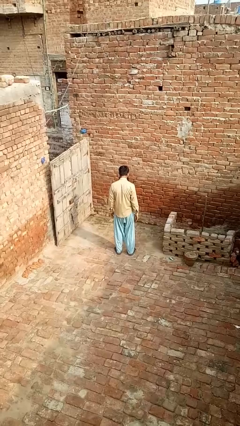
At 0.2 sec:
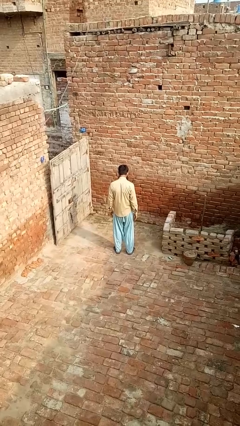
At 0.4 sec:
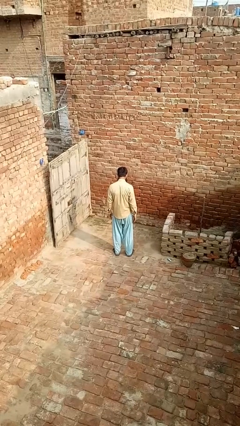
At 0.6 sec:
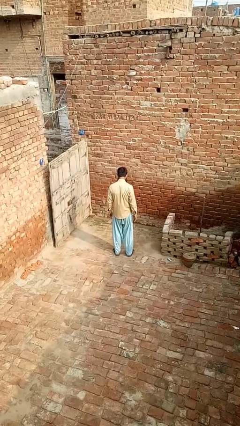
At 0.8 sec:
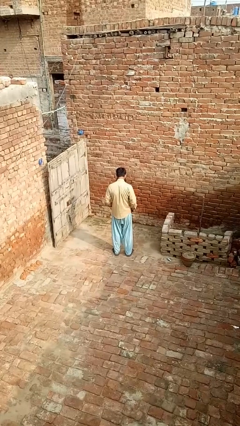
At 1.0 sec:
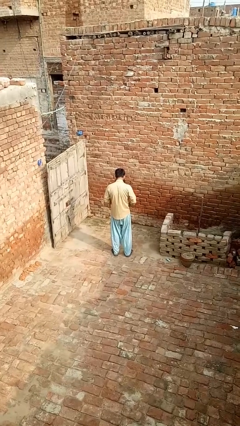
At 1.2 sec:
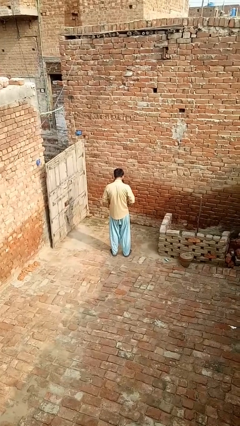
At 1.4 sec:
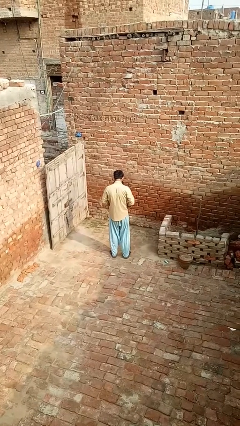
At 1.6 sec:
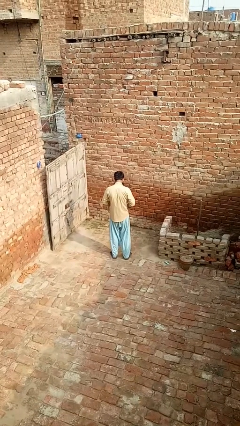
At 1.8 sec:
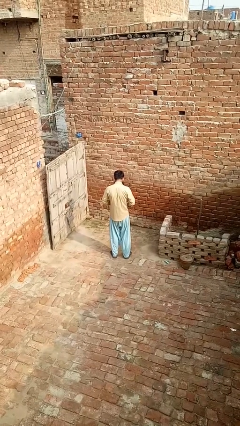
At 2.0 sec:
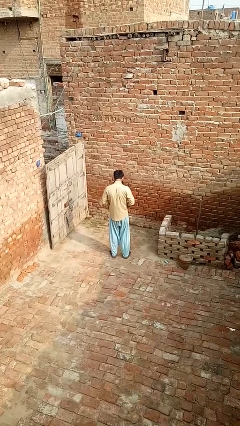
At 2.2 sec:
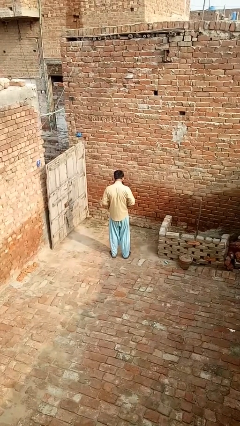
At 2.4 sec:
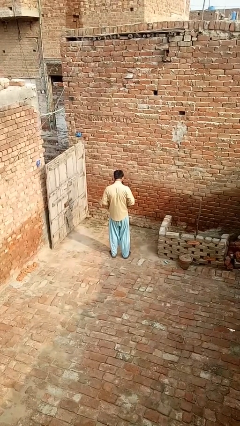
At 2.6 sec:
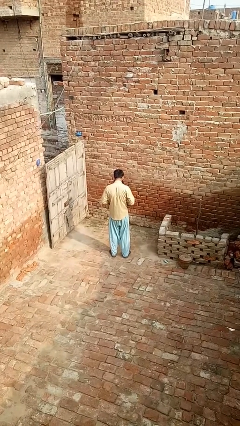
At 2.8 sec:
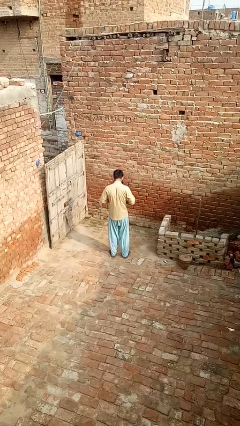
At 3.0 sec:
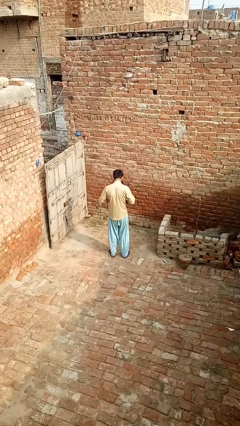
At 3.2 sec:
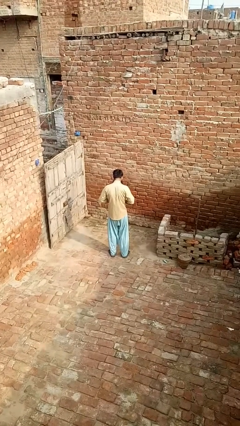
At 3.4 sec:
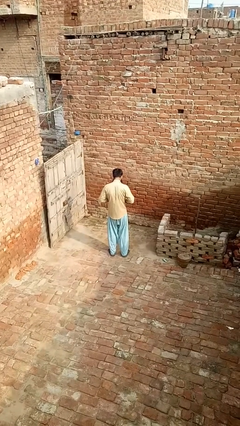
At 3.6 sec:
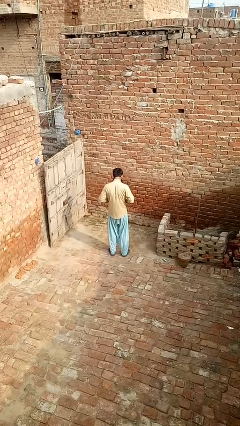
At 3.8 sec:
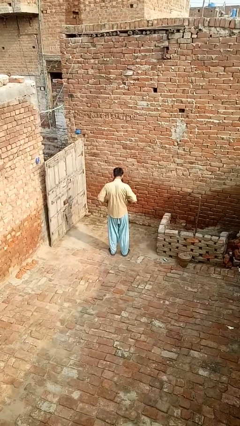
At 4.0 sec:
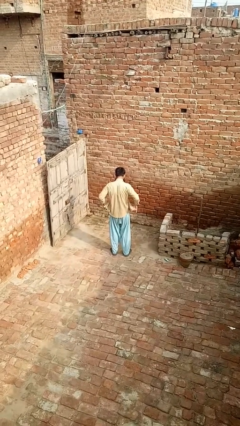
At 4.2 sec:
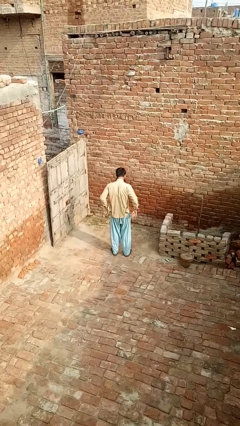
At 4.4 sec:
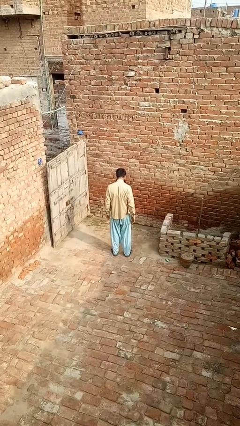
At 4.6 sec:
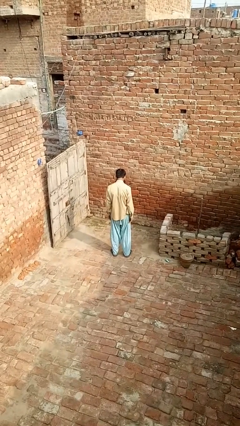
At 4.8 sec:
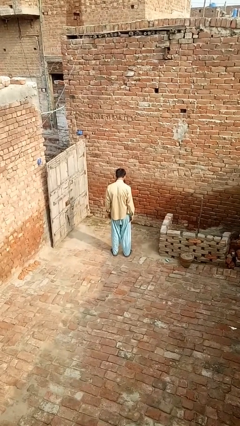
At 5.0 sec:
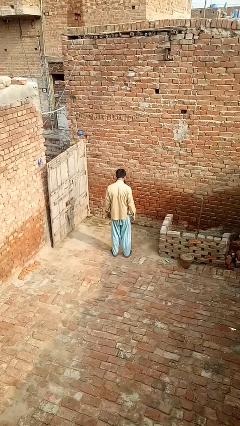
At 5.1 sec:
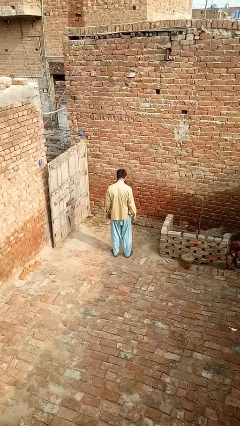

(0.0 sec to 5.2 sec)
person unbuttons shirt

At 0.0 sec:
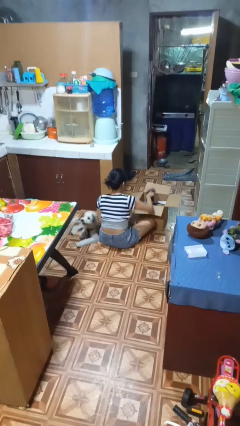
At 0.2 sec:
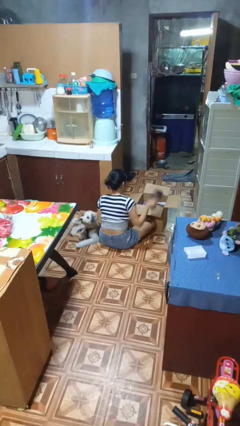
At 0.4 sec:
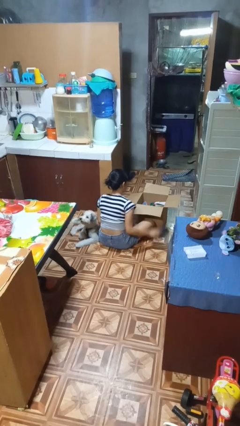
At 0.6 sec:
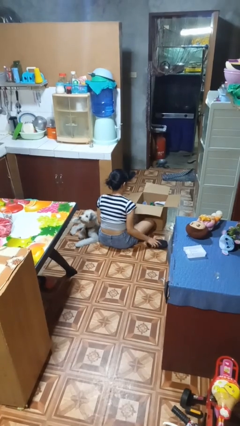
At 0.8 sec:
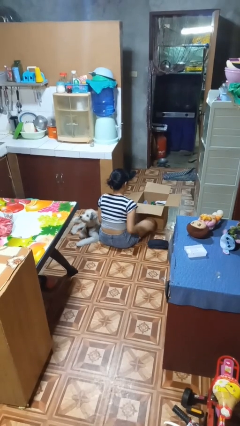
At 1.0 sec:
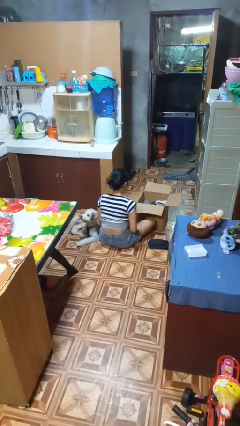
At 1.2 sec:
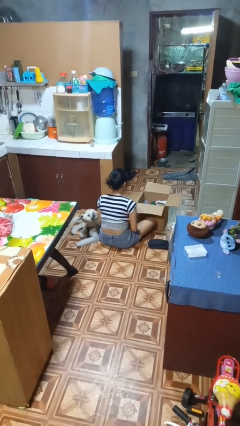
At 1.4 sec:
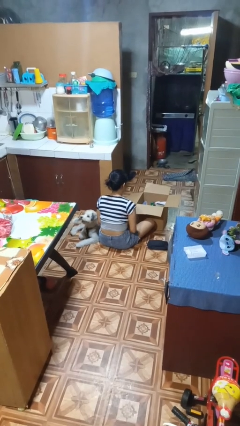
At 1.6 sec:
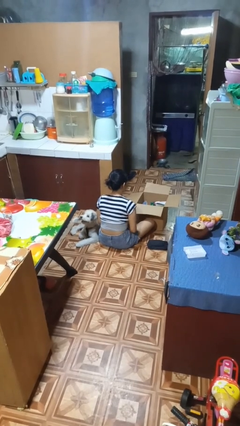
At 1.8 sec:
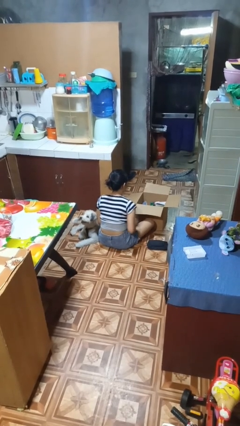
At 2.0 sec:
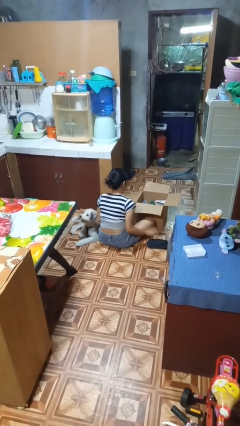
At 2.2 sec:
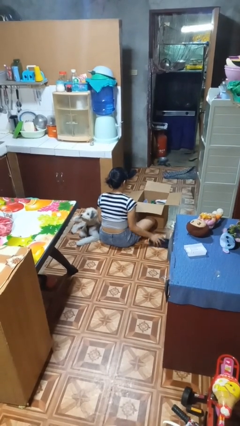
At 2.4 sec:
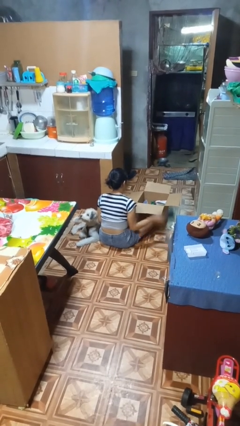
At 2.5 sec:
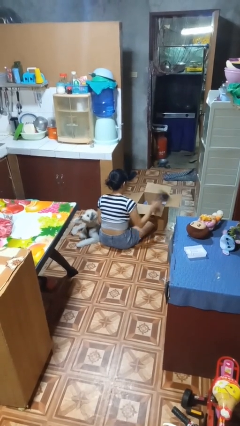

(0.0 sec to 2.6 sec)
person takes object from box

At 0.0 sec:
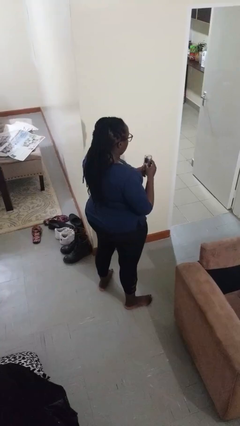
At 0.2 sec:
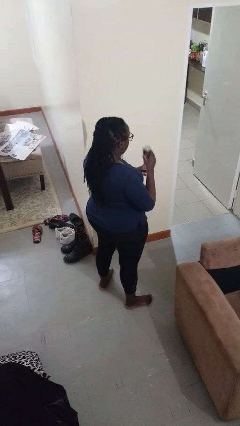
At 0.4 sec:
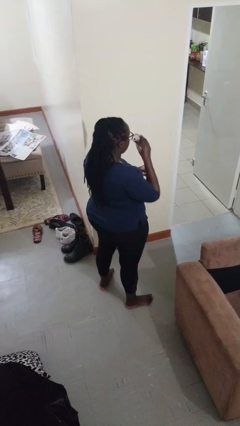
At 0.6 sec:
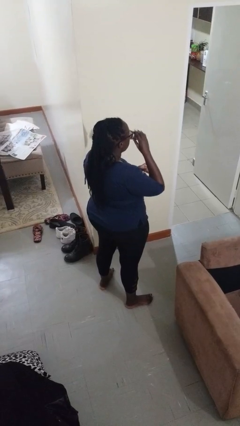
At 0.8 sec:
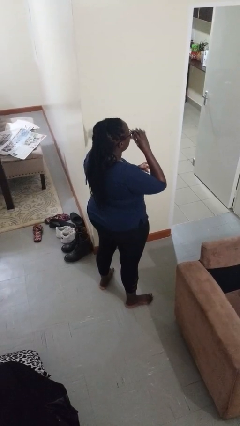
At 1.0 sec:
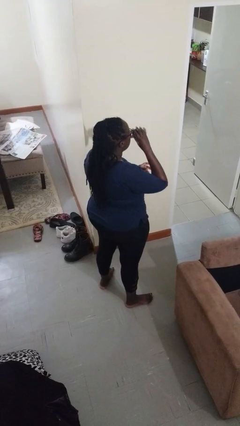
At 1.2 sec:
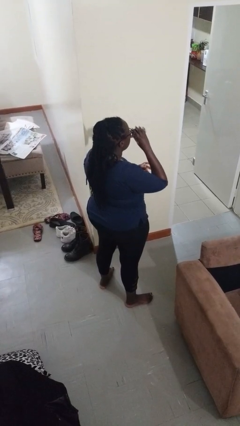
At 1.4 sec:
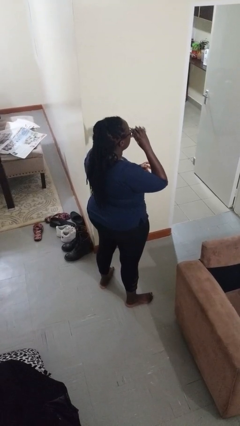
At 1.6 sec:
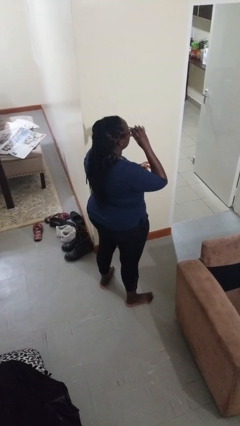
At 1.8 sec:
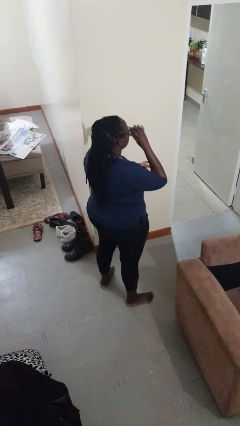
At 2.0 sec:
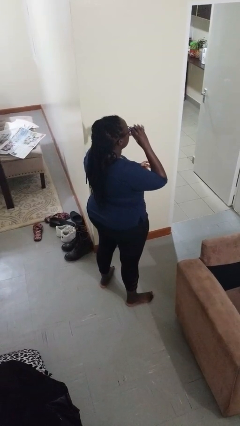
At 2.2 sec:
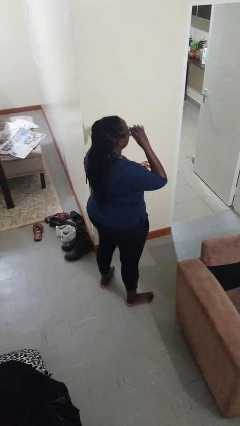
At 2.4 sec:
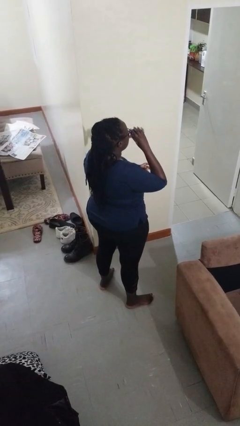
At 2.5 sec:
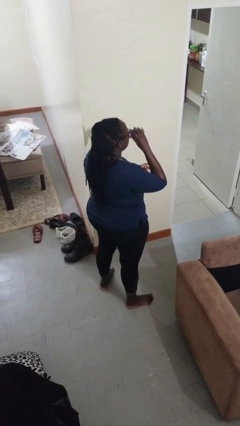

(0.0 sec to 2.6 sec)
person drinks from beverage can

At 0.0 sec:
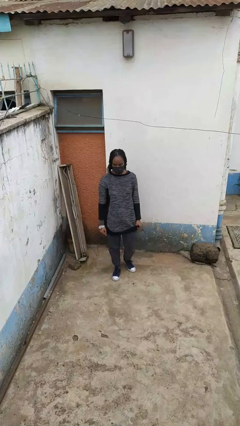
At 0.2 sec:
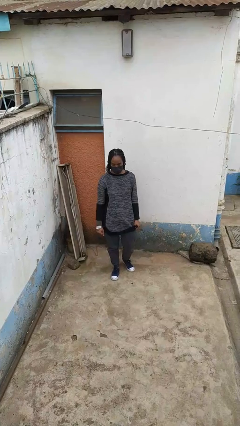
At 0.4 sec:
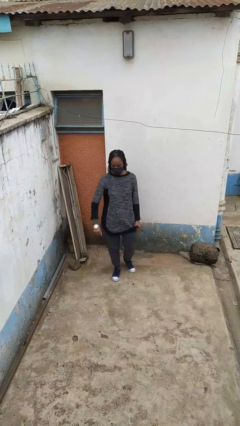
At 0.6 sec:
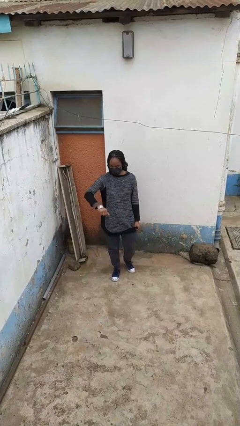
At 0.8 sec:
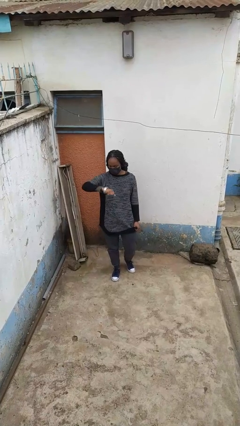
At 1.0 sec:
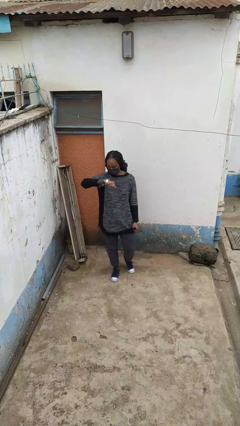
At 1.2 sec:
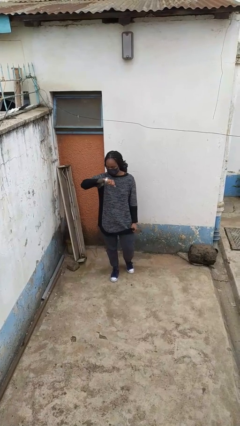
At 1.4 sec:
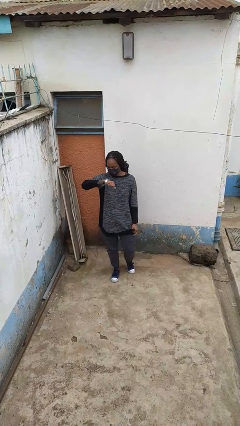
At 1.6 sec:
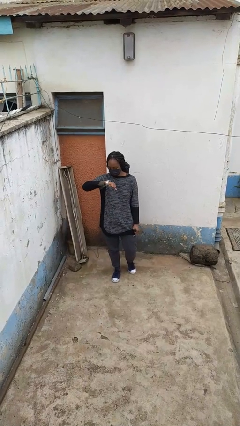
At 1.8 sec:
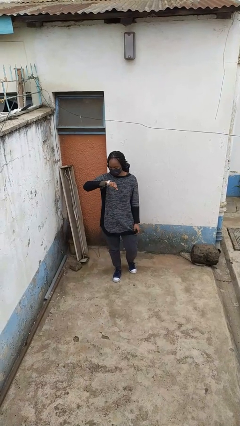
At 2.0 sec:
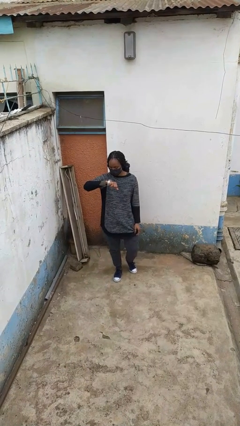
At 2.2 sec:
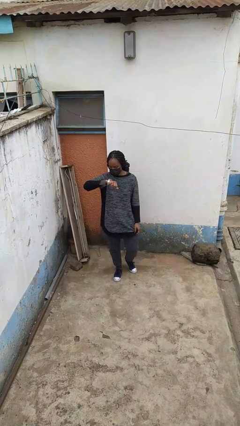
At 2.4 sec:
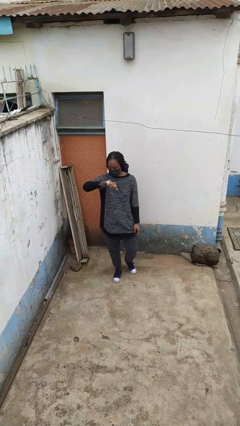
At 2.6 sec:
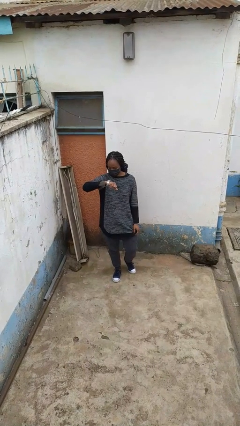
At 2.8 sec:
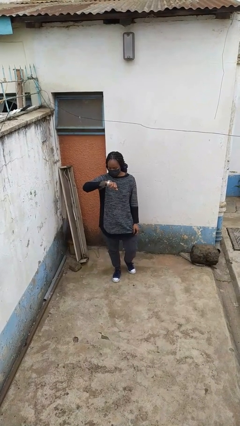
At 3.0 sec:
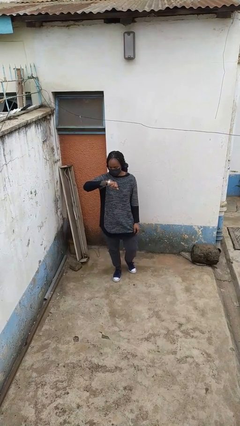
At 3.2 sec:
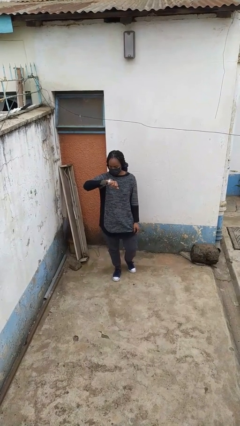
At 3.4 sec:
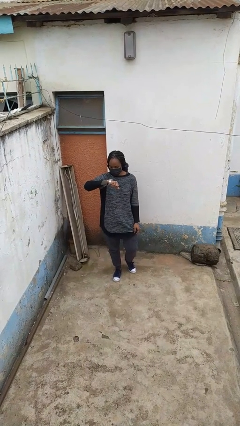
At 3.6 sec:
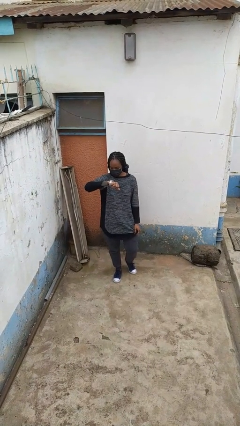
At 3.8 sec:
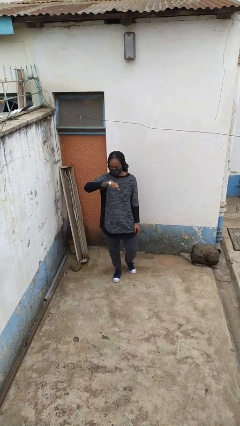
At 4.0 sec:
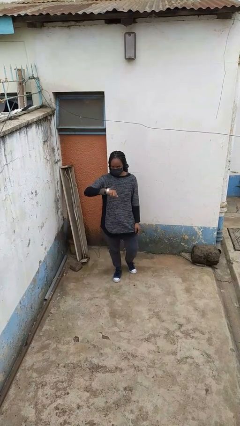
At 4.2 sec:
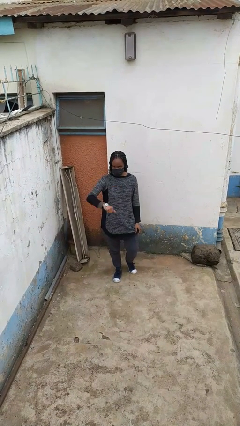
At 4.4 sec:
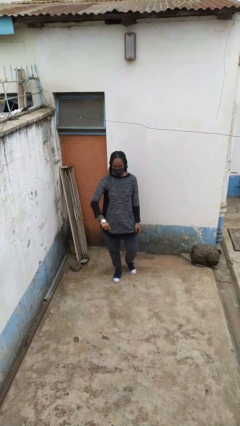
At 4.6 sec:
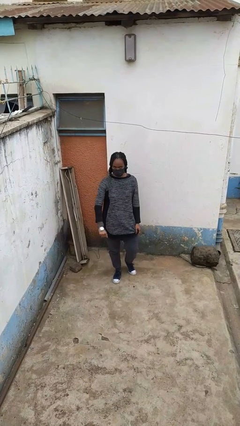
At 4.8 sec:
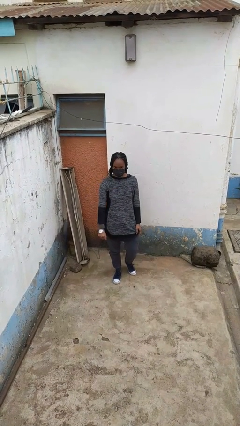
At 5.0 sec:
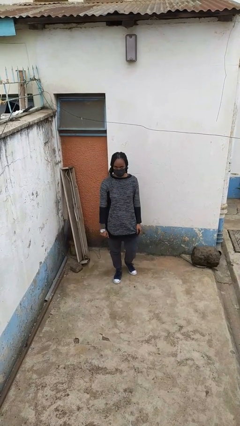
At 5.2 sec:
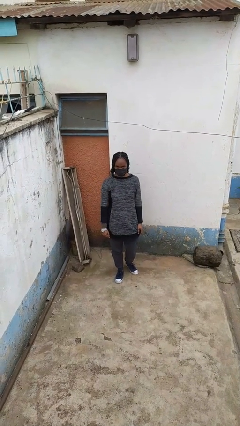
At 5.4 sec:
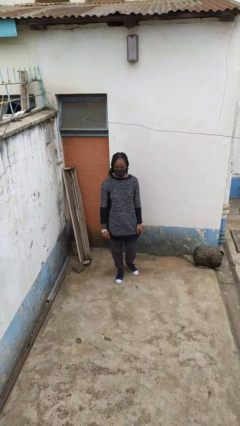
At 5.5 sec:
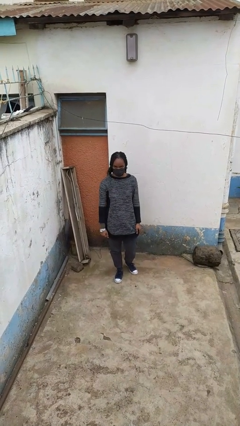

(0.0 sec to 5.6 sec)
person looks at wristwatch

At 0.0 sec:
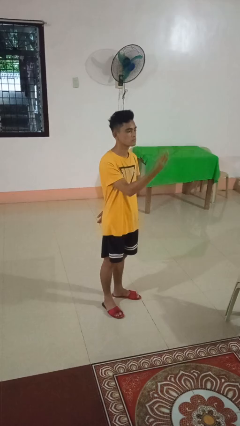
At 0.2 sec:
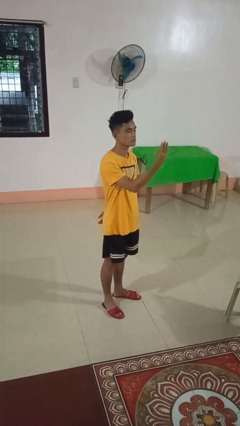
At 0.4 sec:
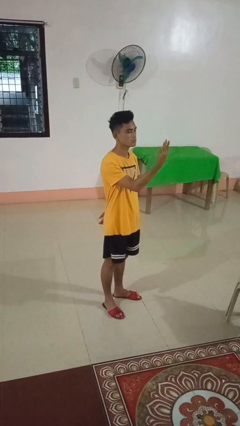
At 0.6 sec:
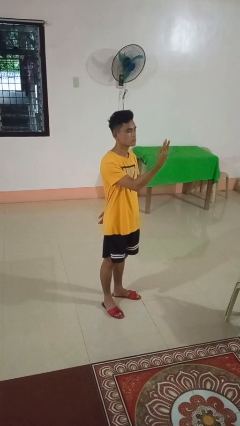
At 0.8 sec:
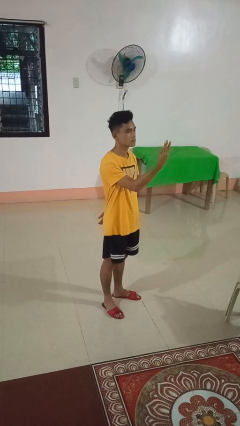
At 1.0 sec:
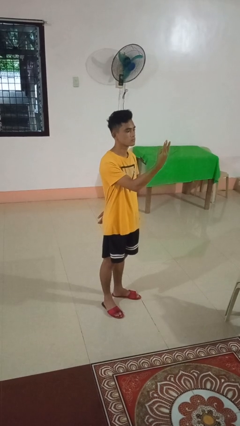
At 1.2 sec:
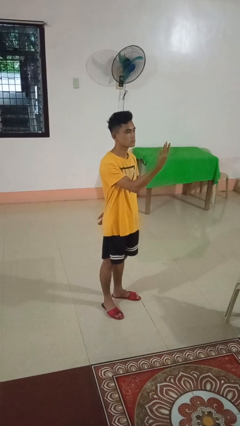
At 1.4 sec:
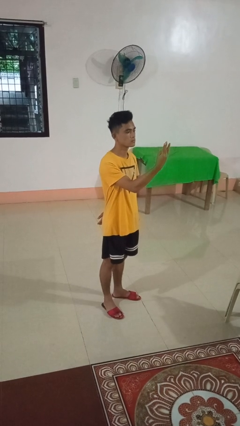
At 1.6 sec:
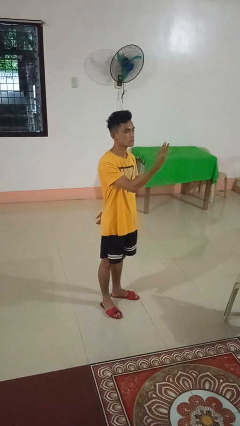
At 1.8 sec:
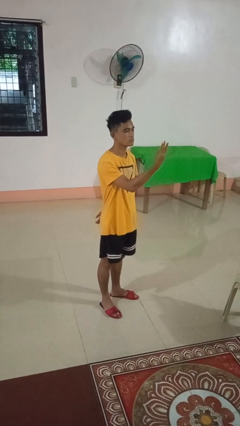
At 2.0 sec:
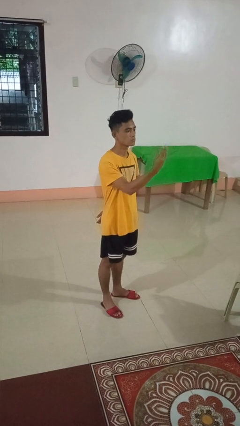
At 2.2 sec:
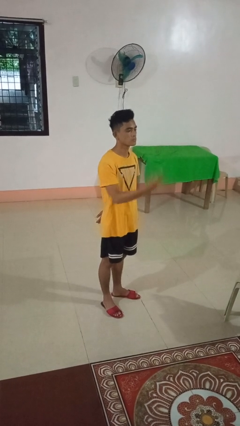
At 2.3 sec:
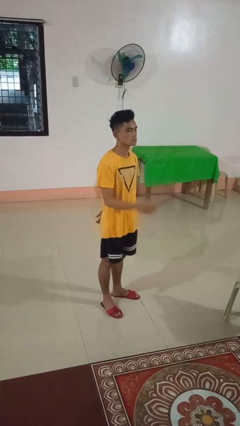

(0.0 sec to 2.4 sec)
person gestures number three
